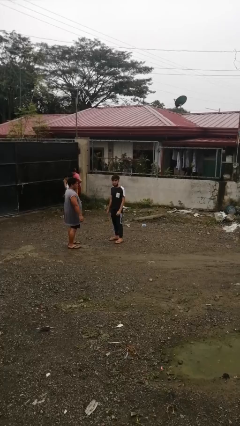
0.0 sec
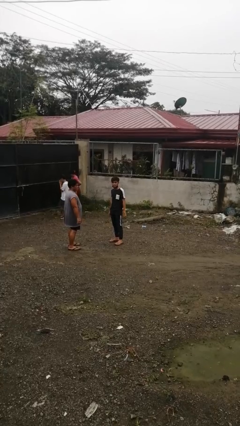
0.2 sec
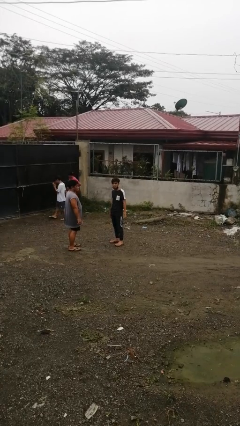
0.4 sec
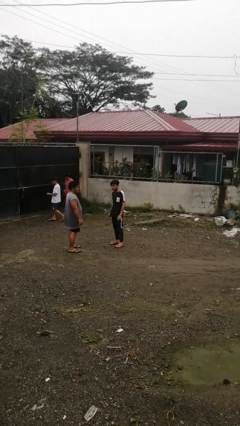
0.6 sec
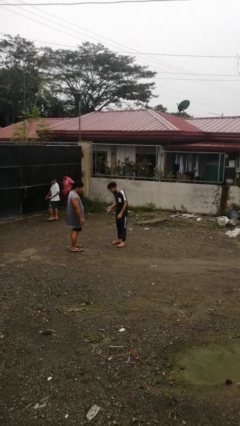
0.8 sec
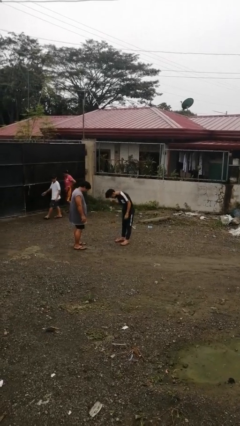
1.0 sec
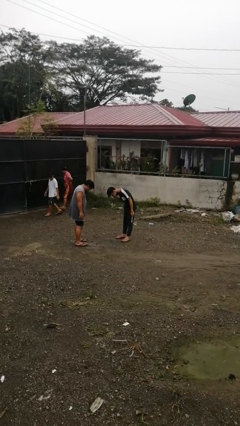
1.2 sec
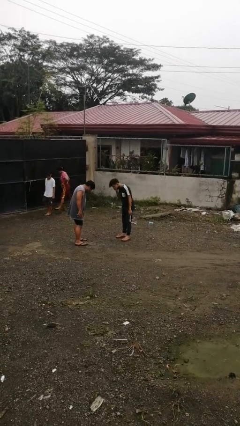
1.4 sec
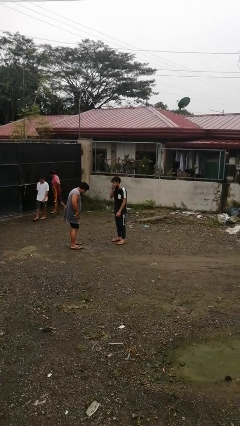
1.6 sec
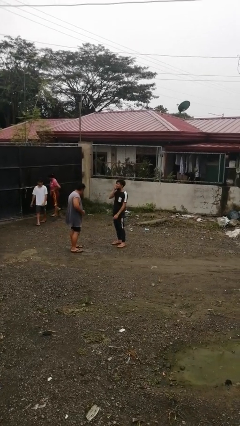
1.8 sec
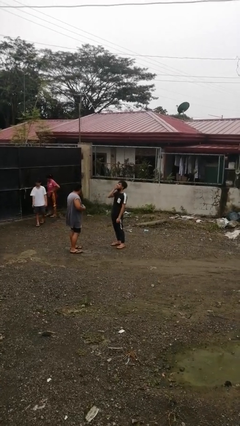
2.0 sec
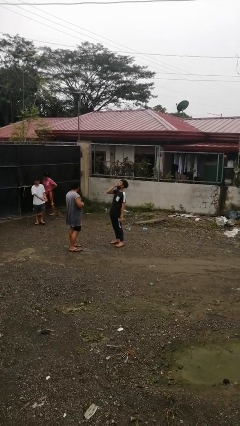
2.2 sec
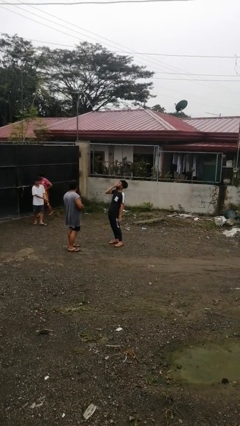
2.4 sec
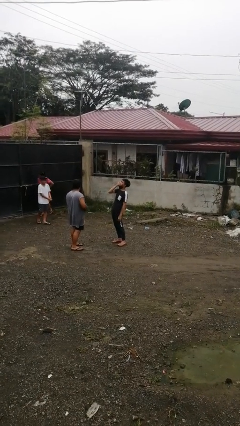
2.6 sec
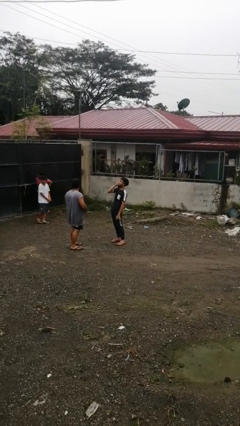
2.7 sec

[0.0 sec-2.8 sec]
person laughs with person

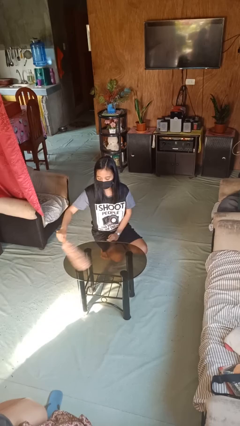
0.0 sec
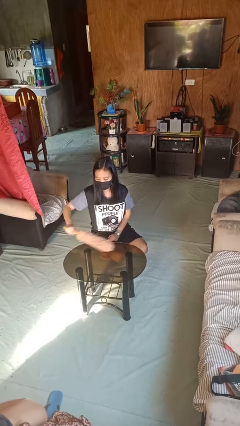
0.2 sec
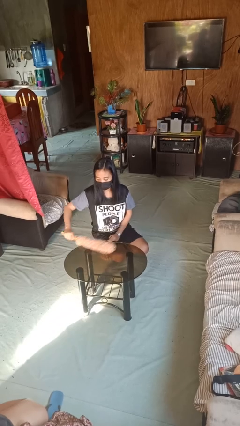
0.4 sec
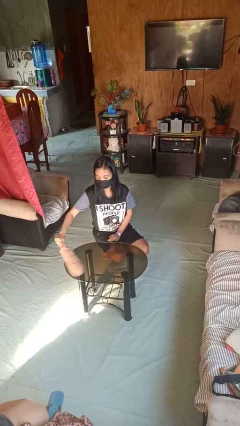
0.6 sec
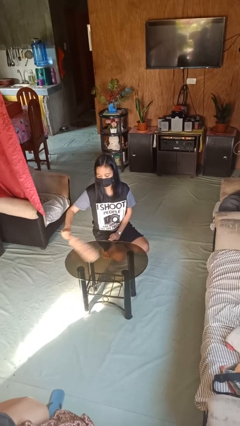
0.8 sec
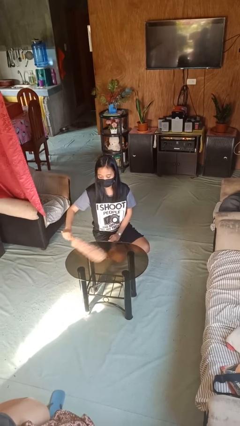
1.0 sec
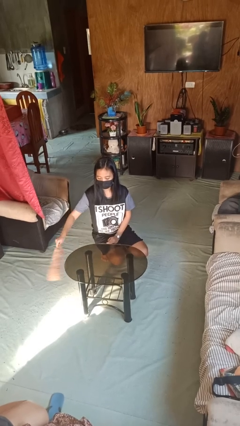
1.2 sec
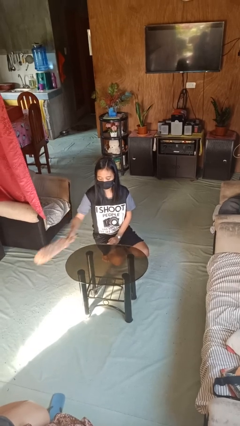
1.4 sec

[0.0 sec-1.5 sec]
person dusts furniture

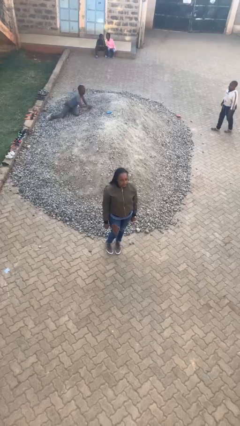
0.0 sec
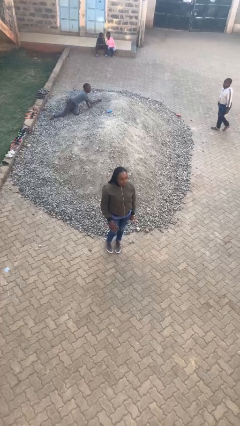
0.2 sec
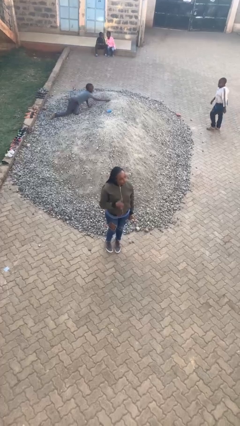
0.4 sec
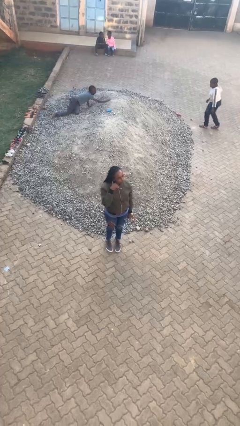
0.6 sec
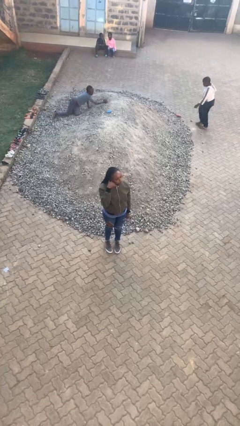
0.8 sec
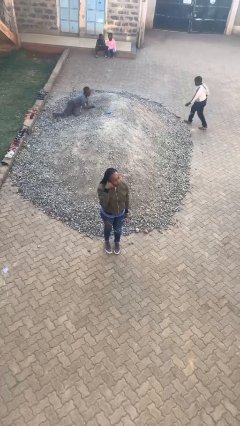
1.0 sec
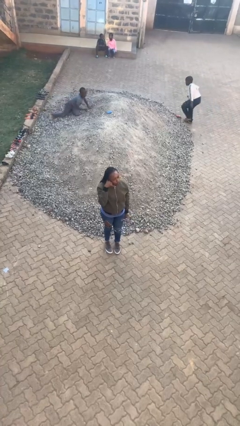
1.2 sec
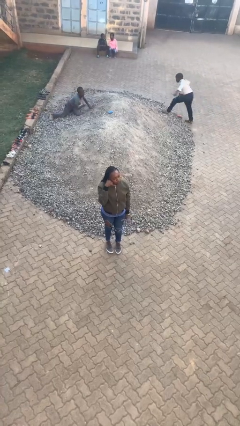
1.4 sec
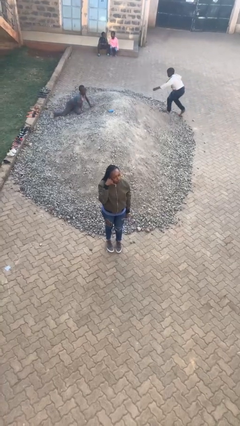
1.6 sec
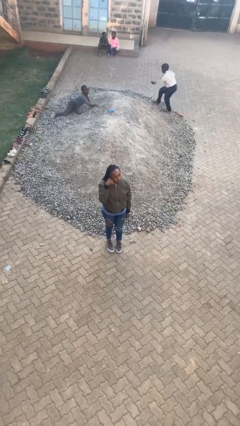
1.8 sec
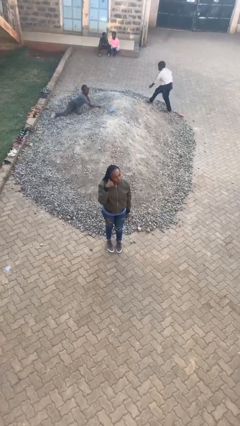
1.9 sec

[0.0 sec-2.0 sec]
person gestures call me

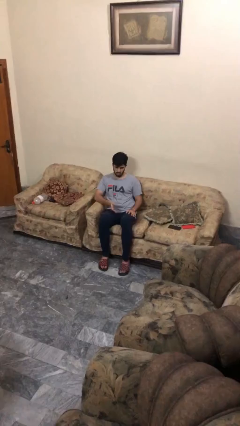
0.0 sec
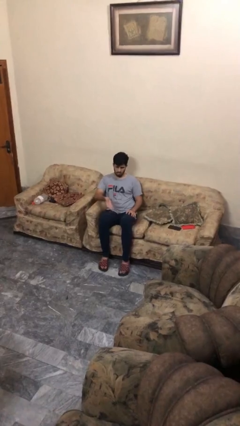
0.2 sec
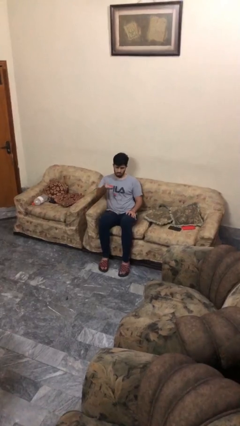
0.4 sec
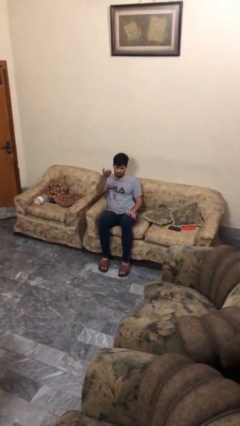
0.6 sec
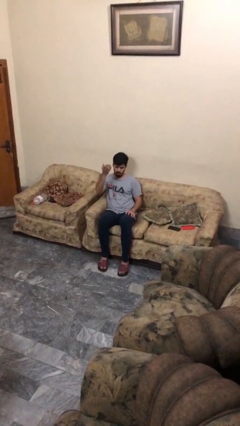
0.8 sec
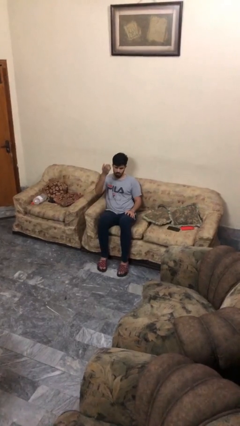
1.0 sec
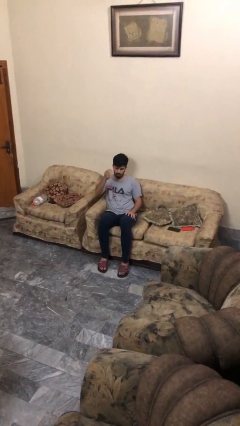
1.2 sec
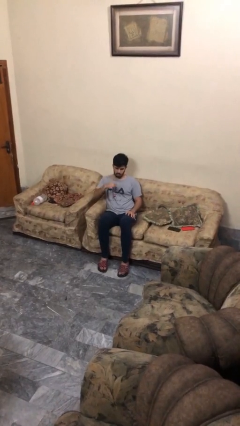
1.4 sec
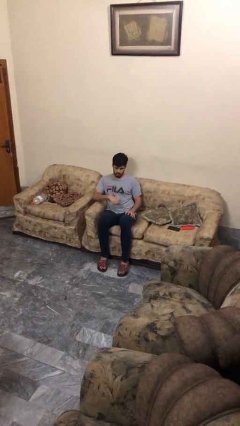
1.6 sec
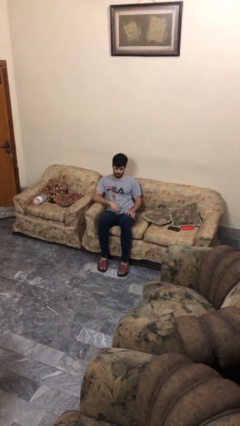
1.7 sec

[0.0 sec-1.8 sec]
person gestures swipe up

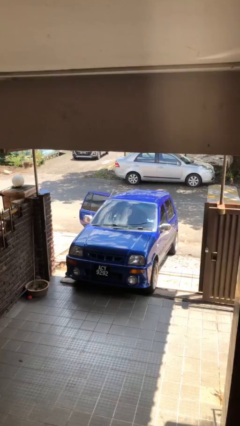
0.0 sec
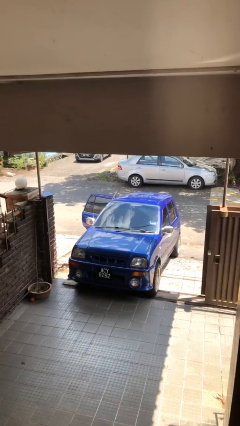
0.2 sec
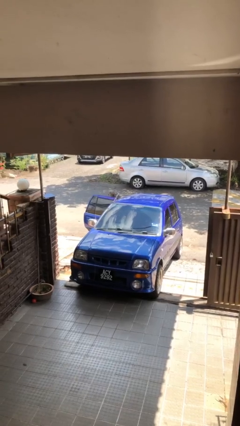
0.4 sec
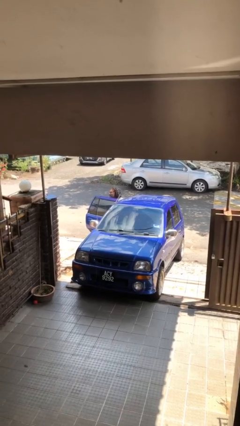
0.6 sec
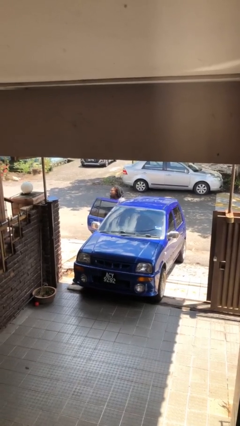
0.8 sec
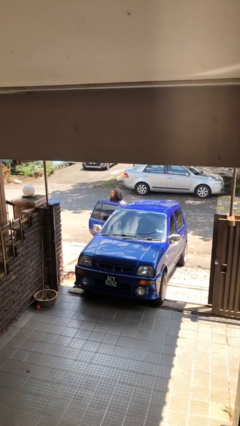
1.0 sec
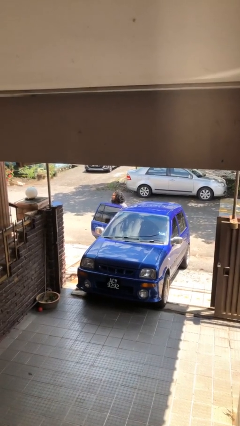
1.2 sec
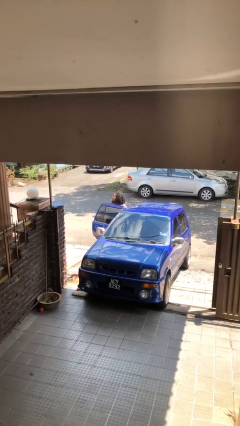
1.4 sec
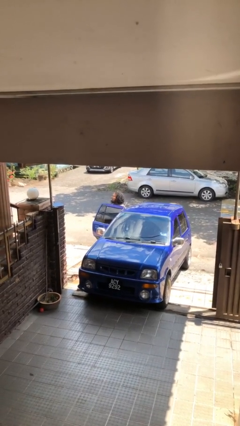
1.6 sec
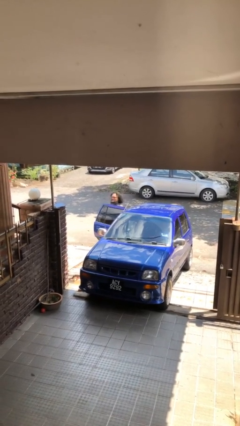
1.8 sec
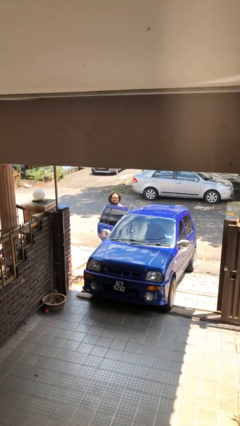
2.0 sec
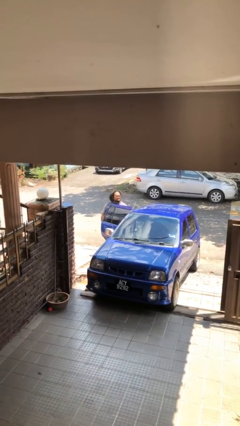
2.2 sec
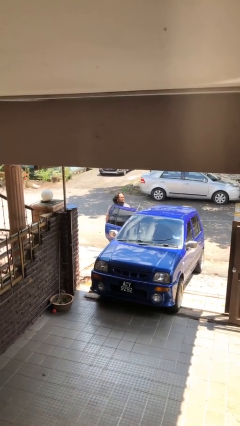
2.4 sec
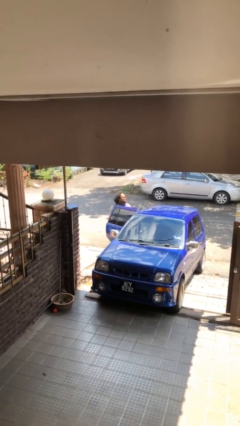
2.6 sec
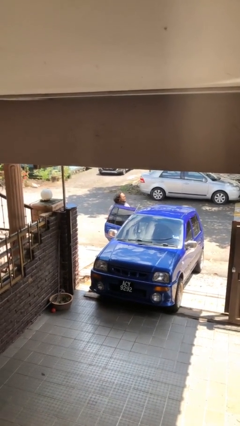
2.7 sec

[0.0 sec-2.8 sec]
person exits car

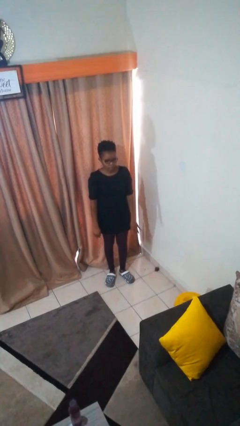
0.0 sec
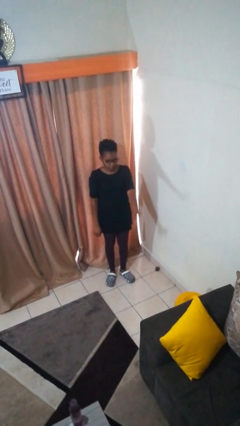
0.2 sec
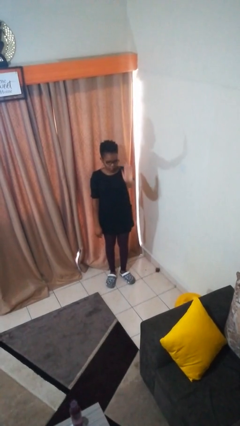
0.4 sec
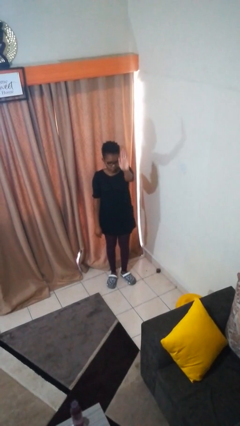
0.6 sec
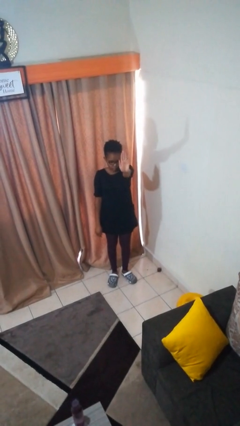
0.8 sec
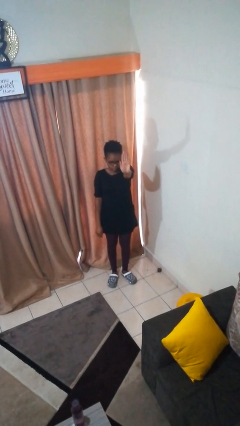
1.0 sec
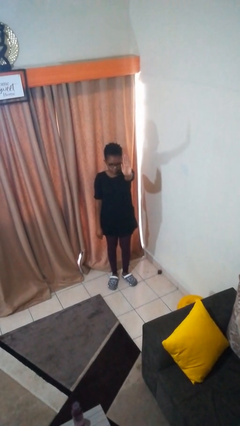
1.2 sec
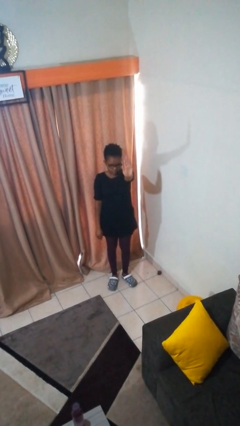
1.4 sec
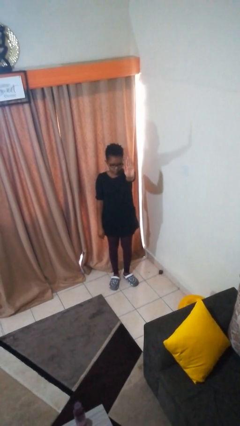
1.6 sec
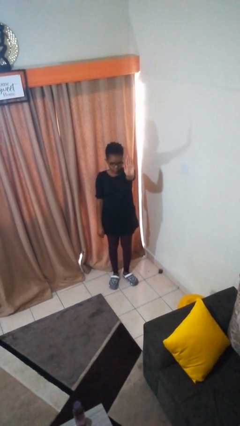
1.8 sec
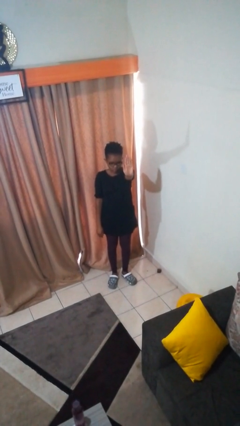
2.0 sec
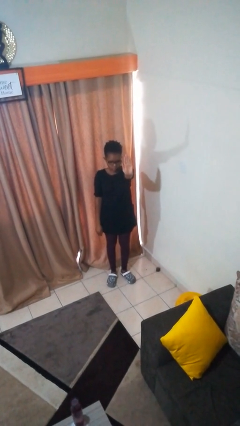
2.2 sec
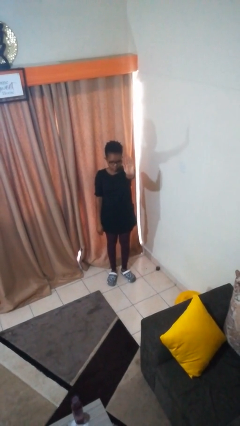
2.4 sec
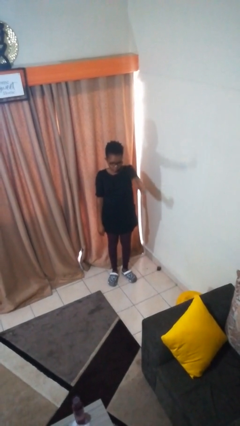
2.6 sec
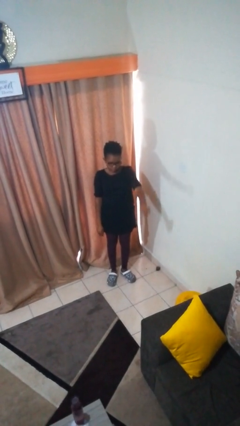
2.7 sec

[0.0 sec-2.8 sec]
person gestures stop

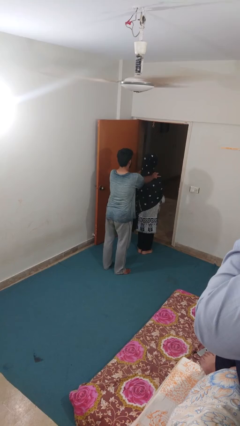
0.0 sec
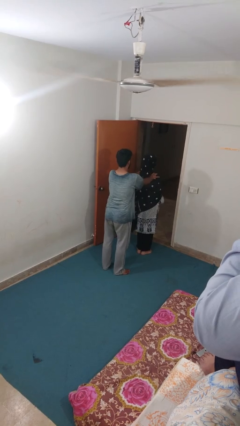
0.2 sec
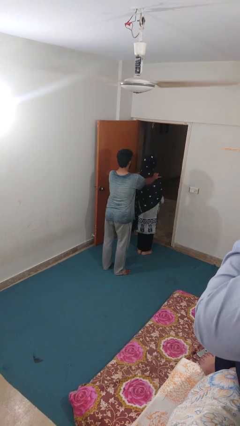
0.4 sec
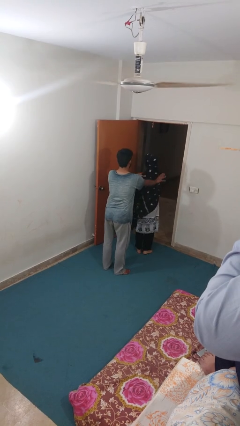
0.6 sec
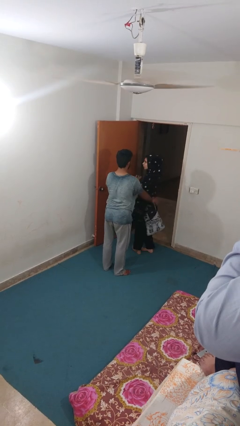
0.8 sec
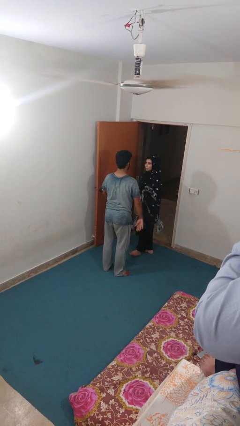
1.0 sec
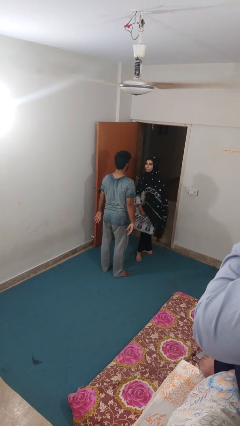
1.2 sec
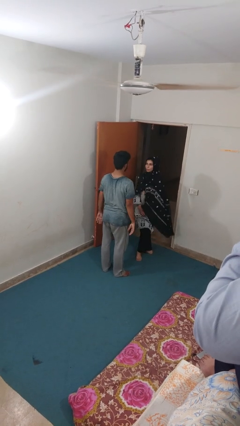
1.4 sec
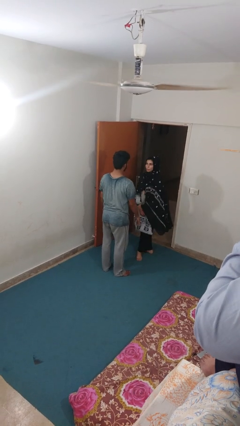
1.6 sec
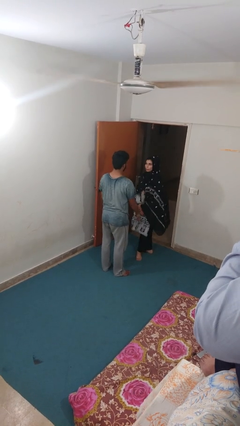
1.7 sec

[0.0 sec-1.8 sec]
person spins person around

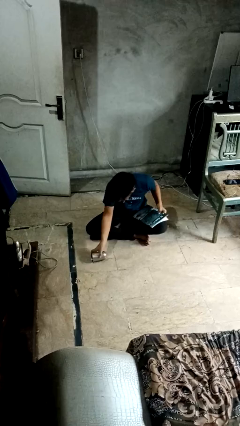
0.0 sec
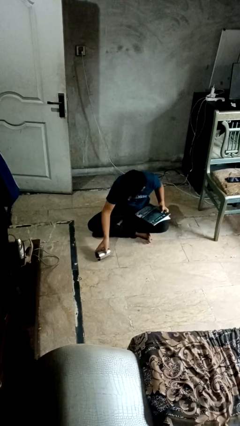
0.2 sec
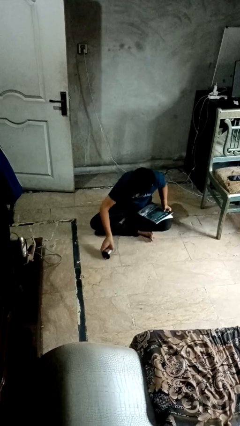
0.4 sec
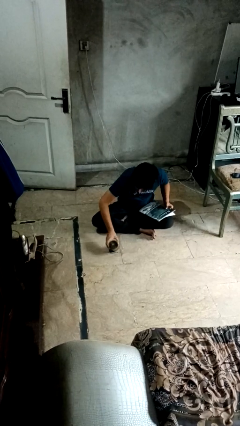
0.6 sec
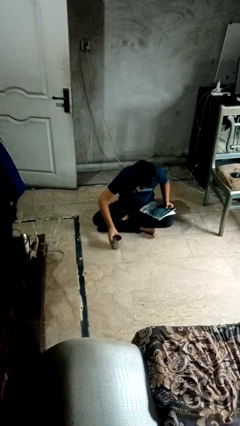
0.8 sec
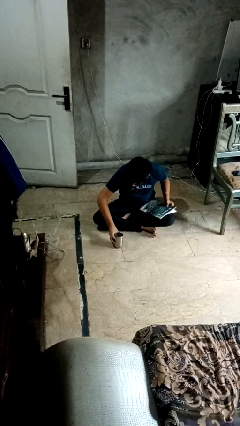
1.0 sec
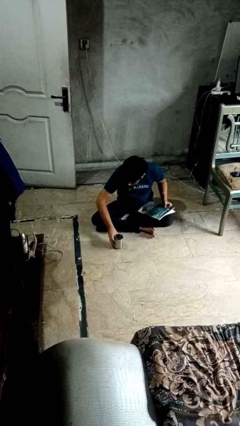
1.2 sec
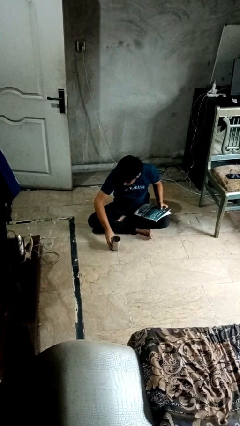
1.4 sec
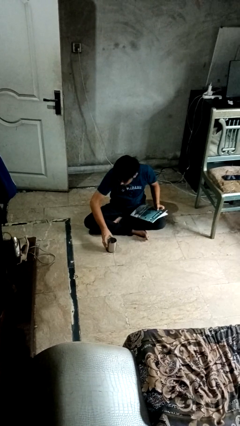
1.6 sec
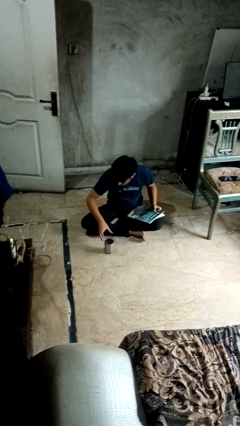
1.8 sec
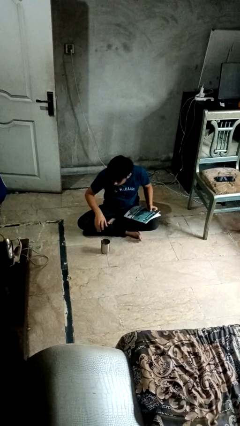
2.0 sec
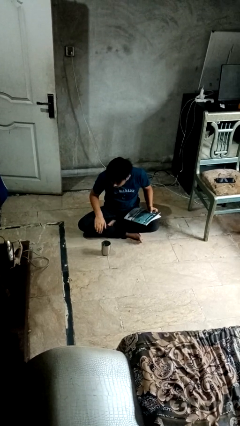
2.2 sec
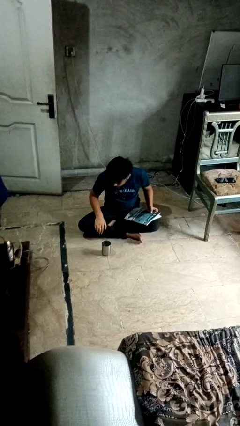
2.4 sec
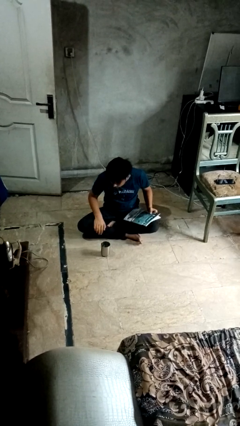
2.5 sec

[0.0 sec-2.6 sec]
person sets upright glass
